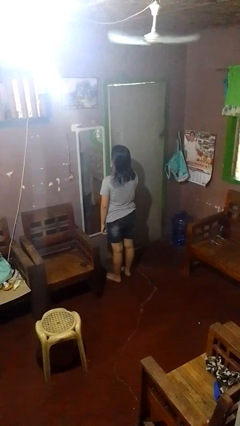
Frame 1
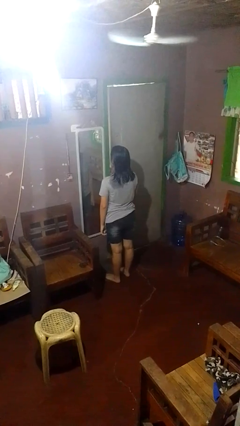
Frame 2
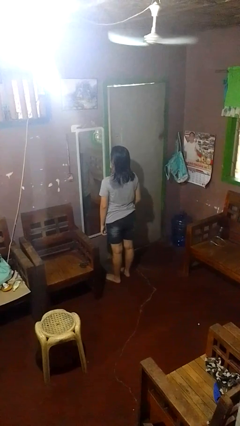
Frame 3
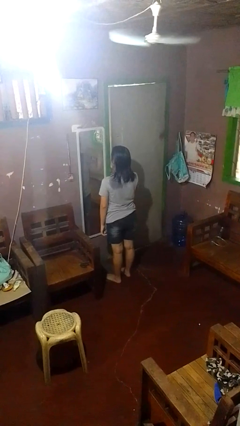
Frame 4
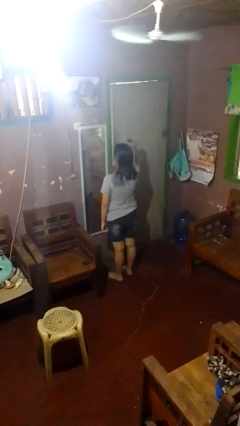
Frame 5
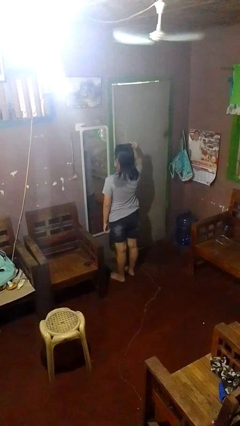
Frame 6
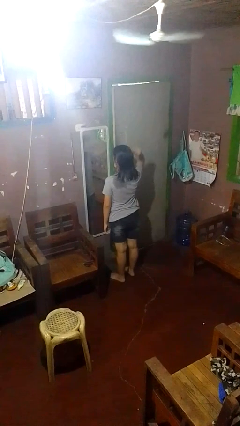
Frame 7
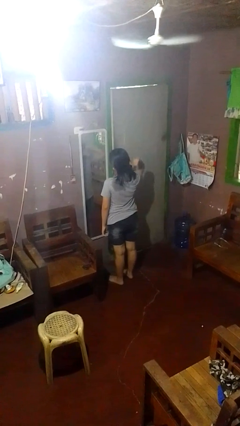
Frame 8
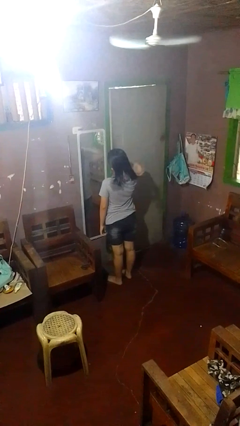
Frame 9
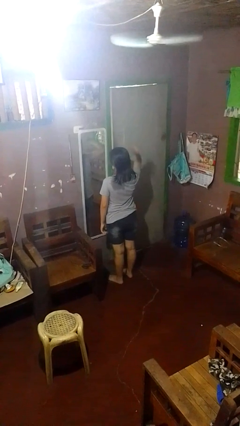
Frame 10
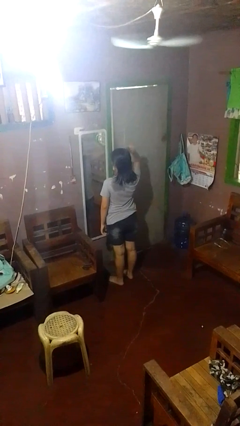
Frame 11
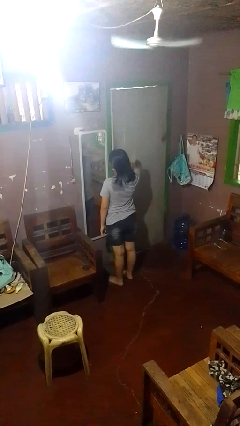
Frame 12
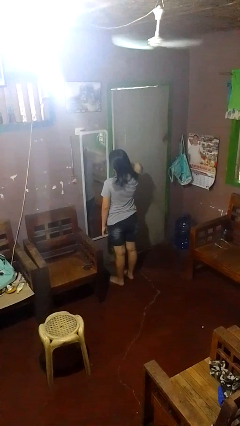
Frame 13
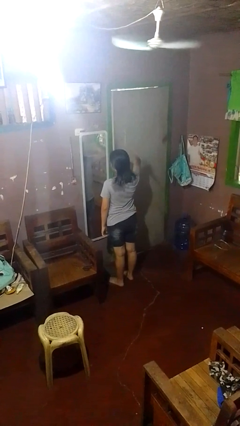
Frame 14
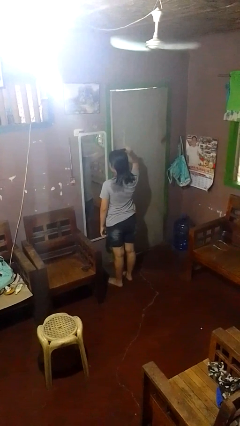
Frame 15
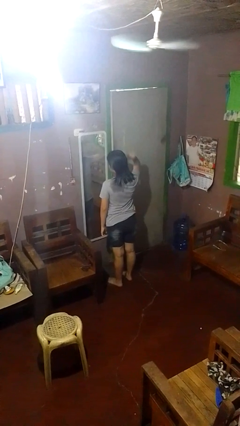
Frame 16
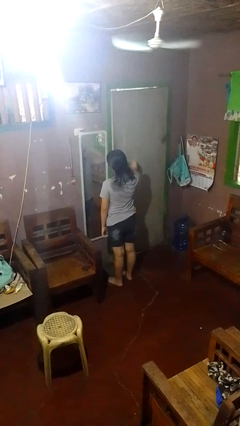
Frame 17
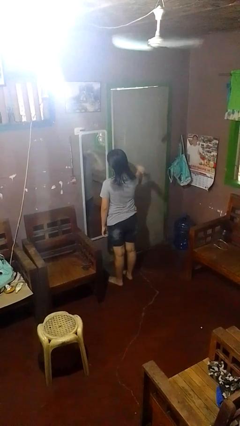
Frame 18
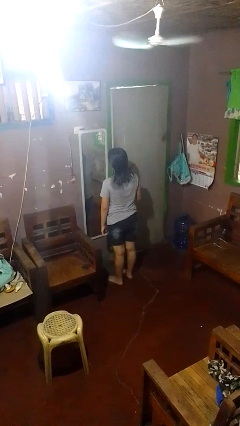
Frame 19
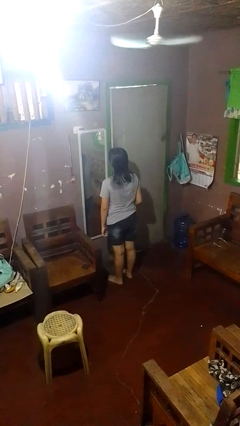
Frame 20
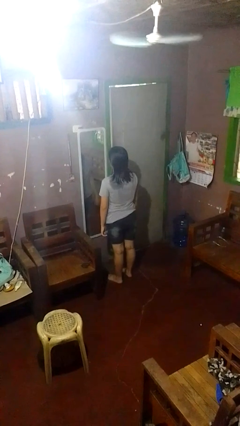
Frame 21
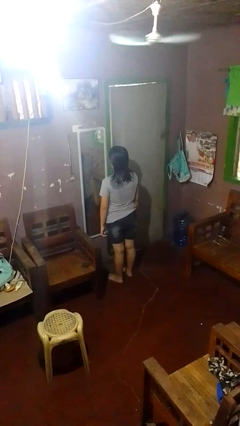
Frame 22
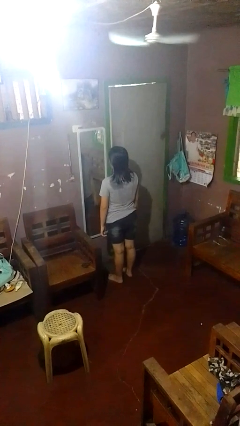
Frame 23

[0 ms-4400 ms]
person brushes hair

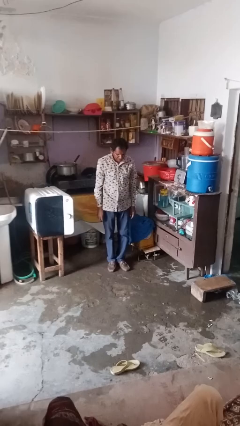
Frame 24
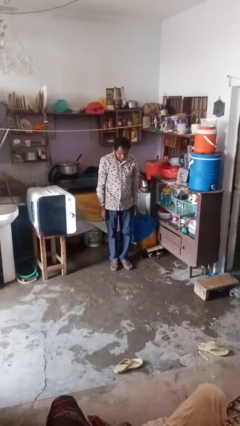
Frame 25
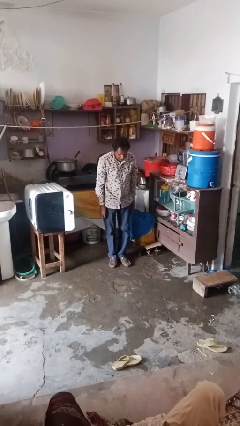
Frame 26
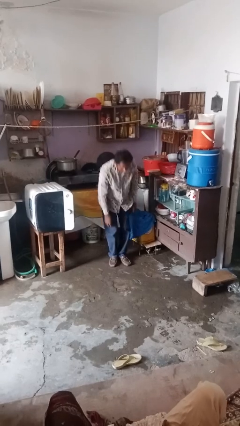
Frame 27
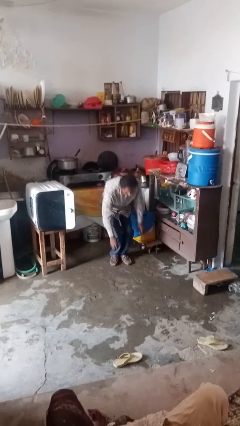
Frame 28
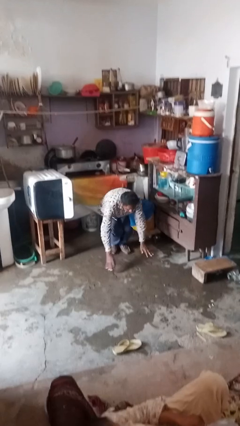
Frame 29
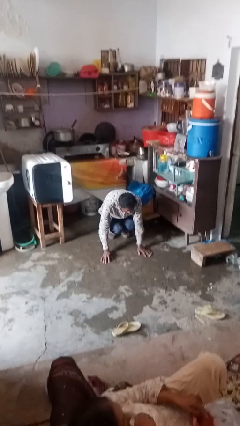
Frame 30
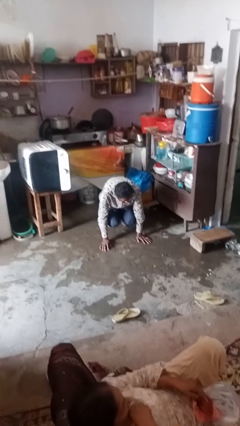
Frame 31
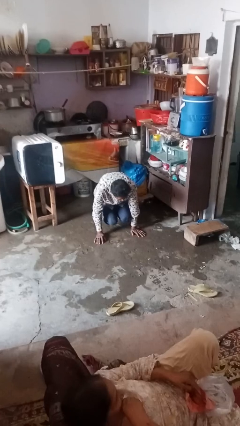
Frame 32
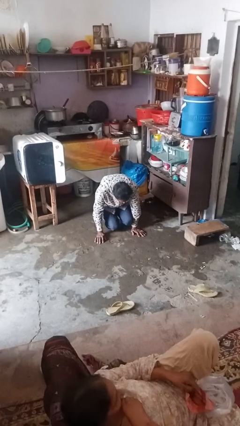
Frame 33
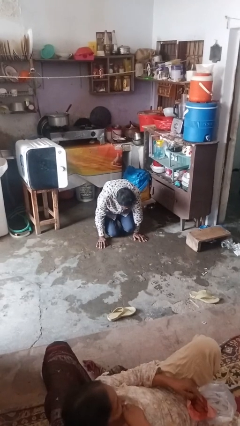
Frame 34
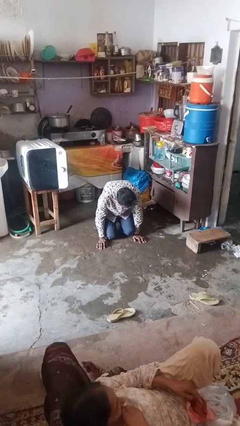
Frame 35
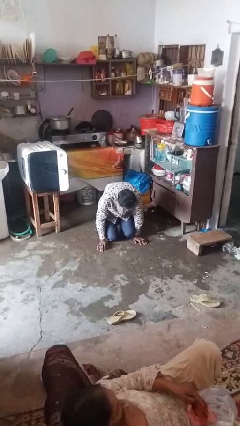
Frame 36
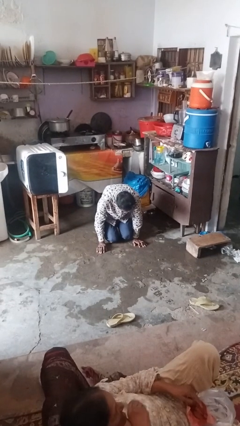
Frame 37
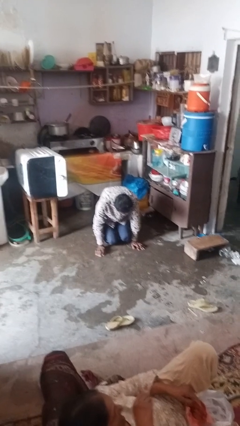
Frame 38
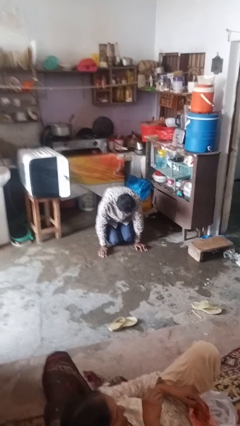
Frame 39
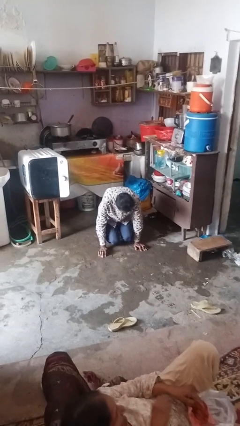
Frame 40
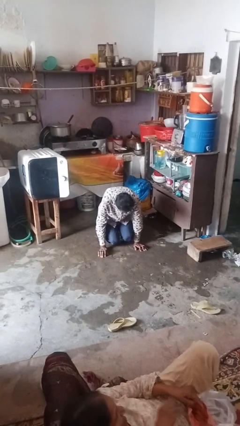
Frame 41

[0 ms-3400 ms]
person falls while standing

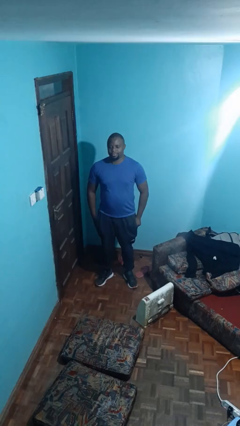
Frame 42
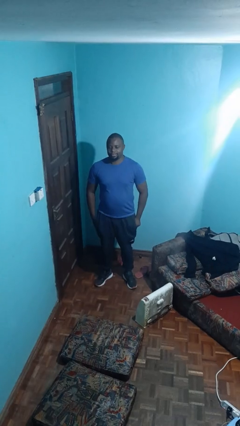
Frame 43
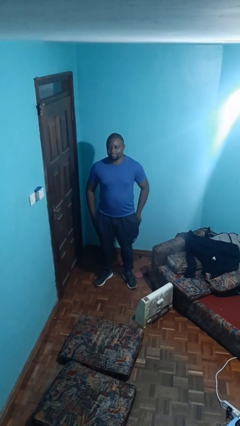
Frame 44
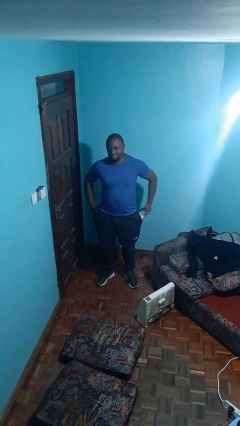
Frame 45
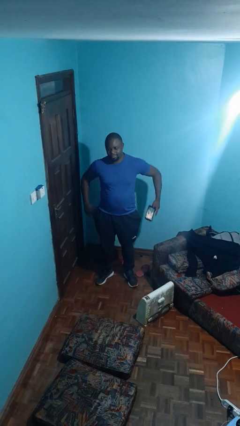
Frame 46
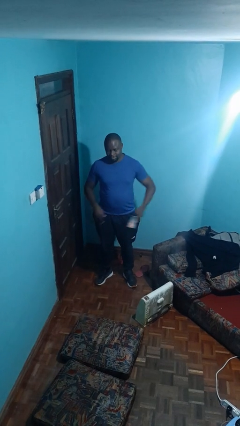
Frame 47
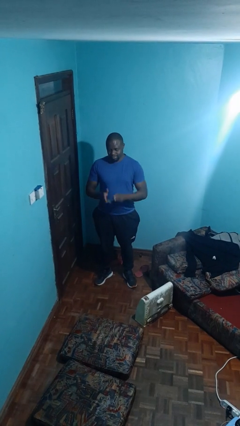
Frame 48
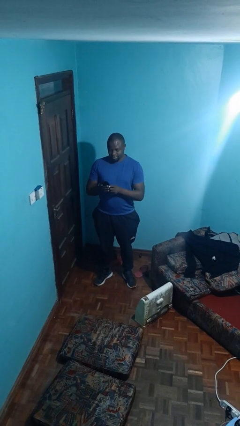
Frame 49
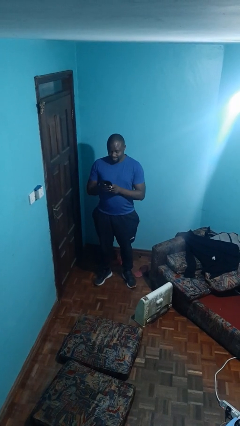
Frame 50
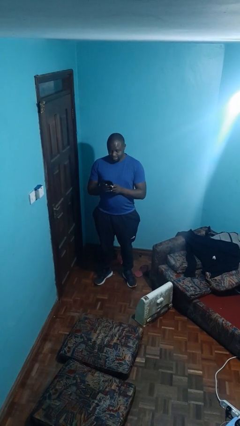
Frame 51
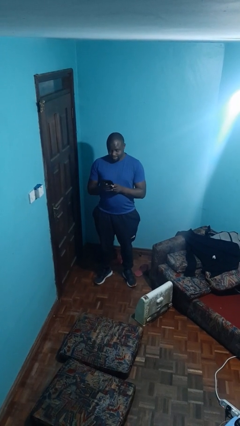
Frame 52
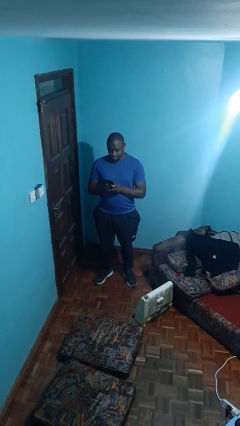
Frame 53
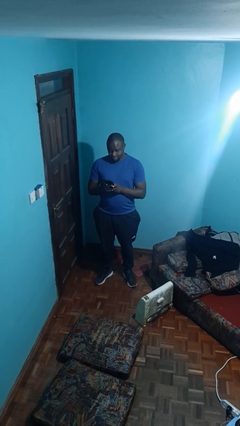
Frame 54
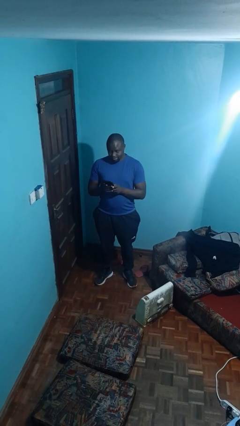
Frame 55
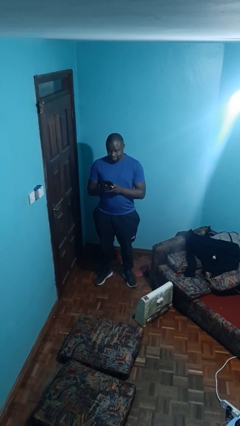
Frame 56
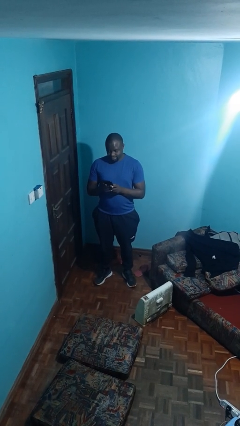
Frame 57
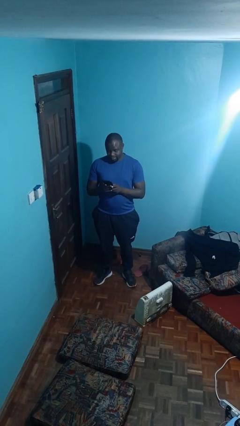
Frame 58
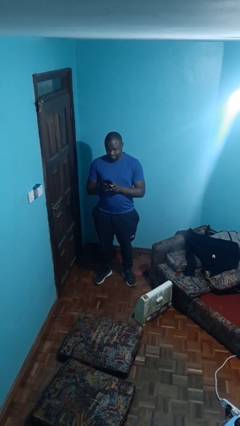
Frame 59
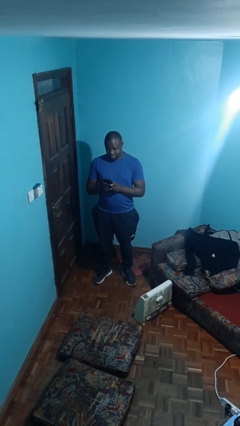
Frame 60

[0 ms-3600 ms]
person takes phone from pocket

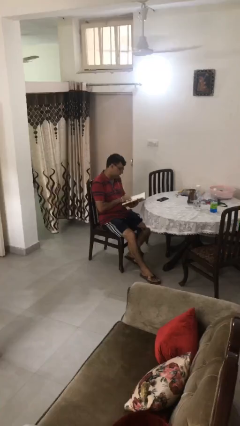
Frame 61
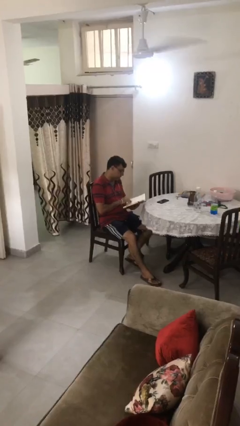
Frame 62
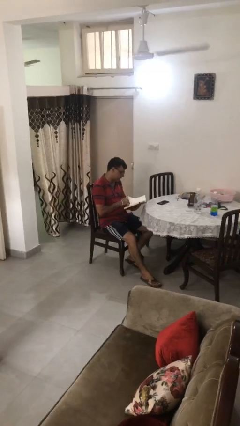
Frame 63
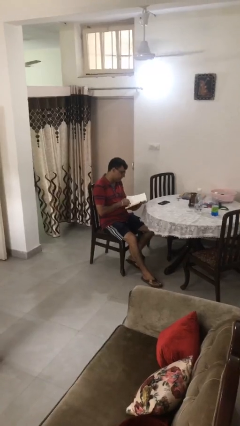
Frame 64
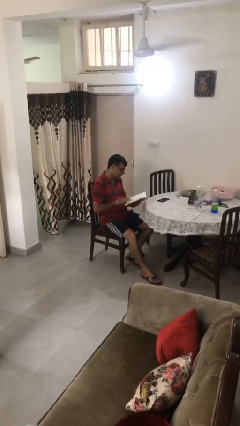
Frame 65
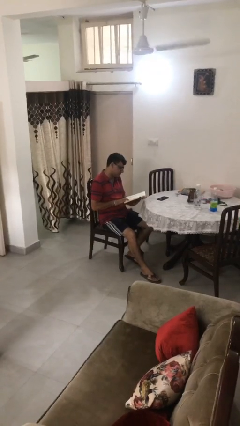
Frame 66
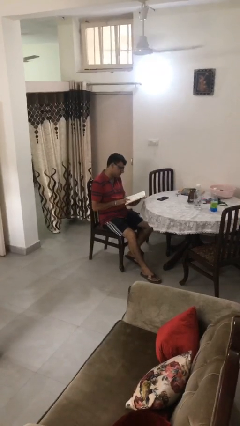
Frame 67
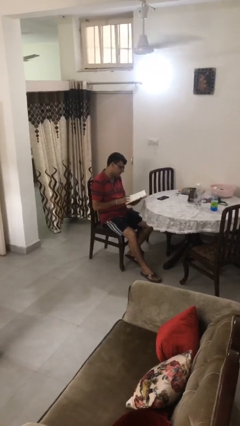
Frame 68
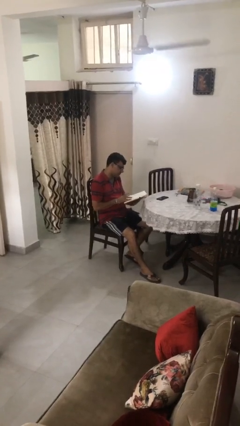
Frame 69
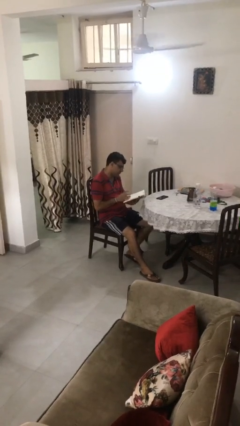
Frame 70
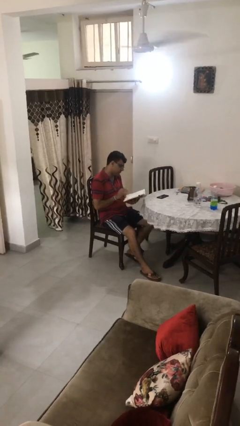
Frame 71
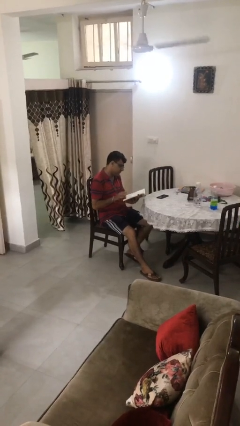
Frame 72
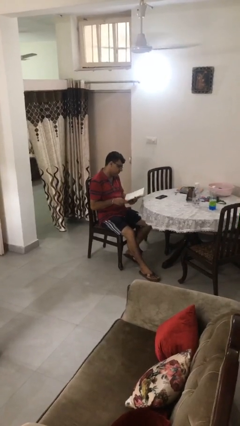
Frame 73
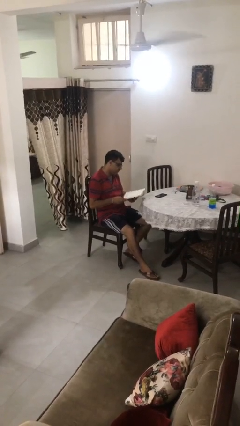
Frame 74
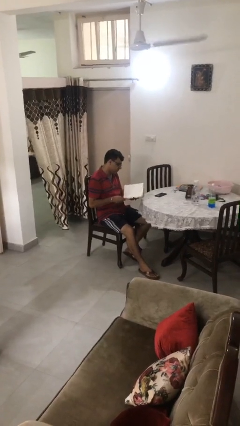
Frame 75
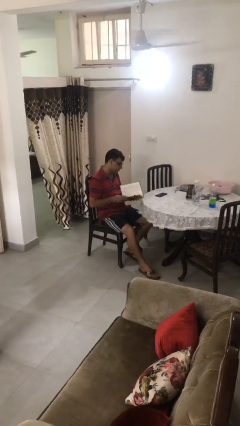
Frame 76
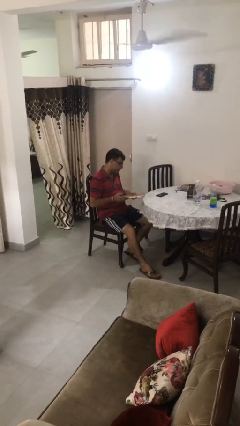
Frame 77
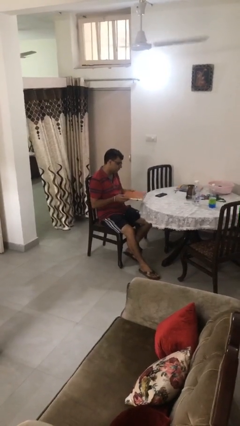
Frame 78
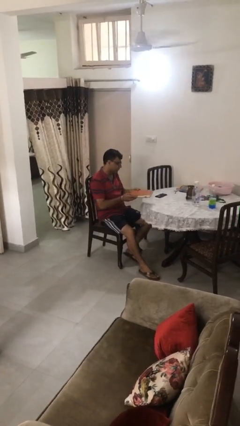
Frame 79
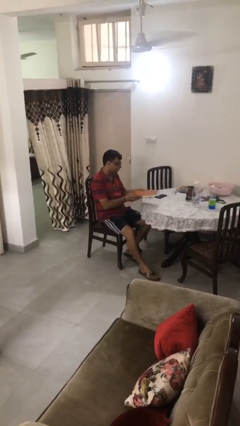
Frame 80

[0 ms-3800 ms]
person reads document

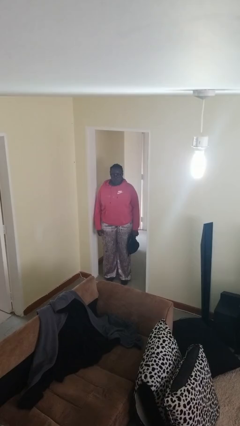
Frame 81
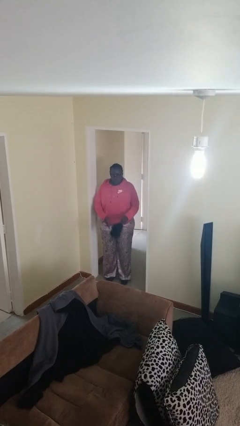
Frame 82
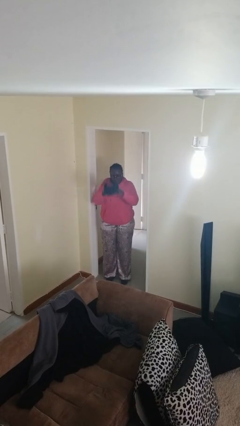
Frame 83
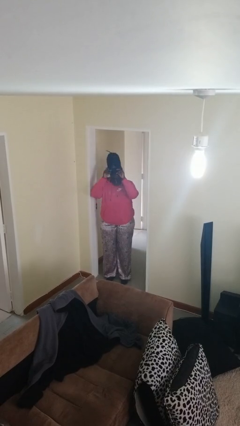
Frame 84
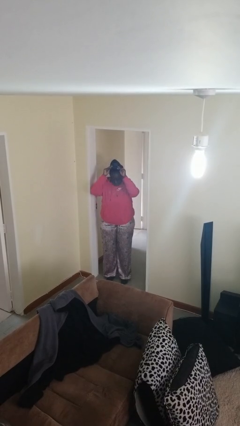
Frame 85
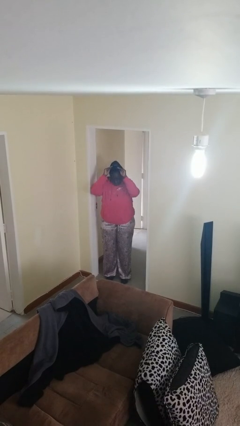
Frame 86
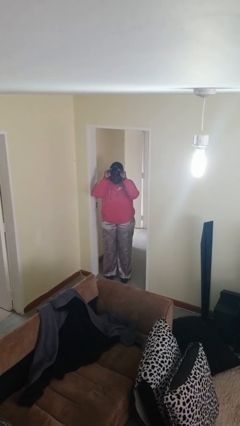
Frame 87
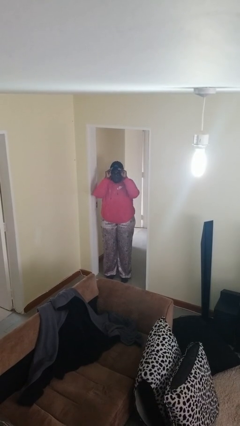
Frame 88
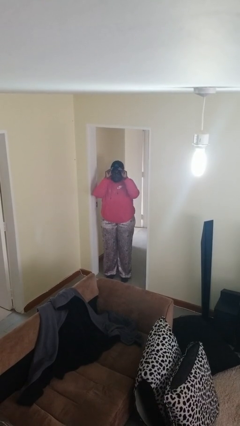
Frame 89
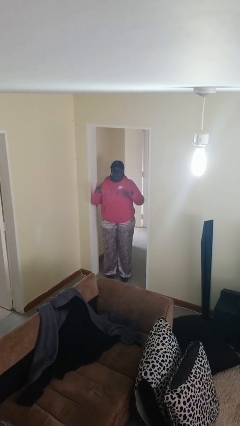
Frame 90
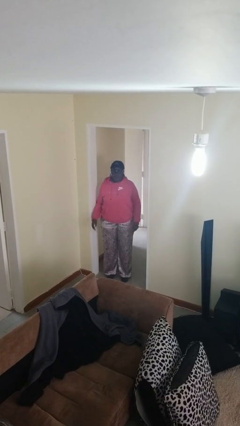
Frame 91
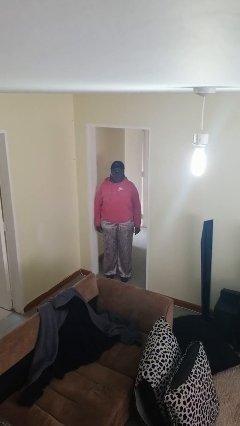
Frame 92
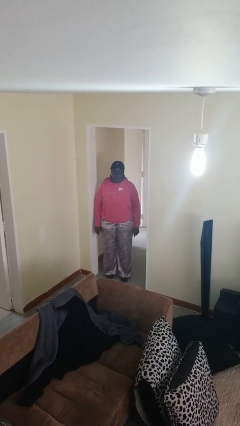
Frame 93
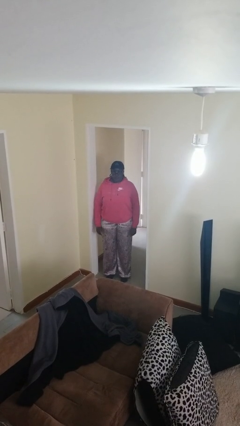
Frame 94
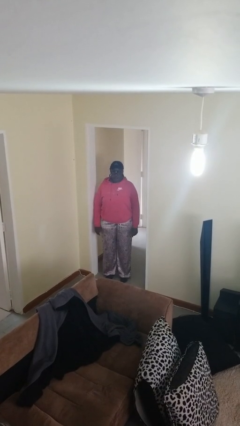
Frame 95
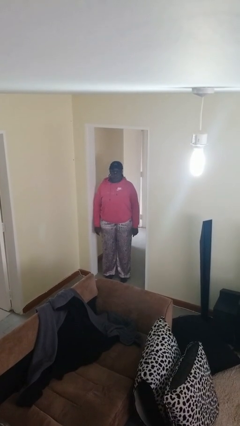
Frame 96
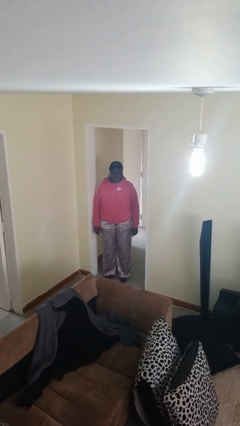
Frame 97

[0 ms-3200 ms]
person puts on hat
